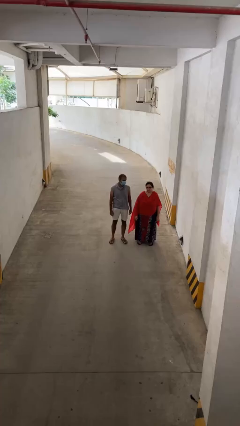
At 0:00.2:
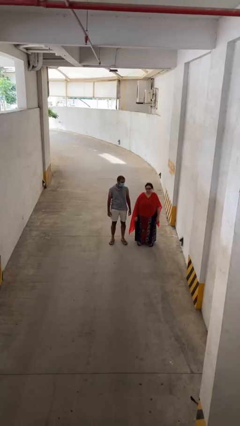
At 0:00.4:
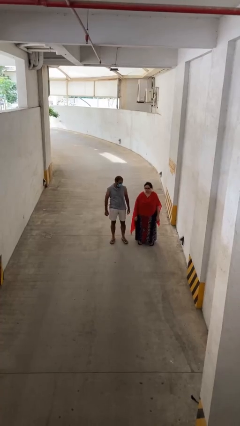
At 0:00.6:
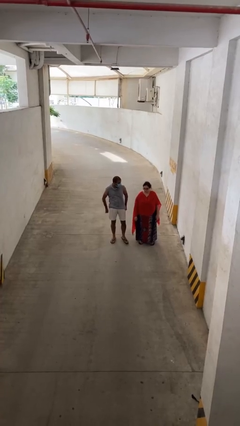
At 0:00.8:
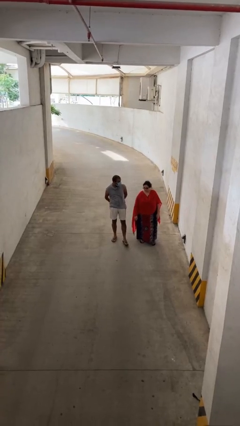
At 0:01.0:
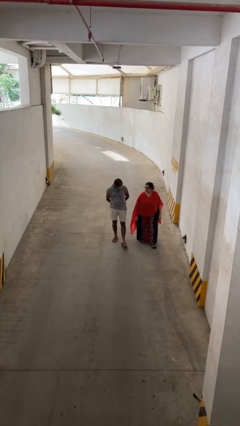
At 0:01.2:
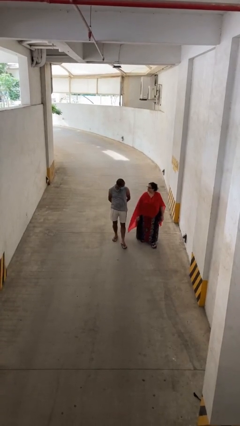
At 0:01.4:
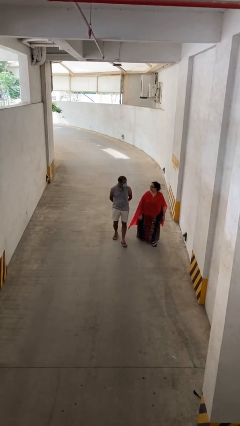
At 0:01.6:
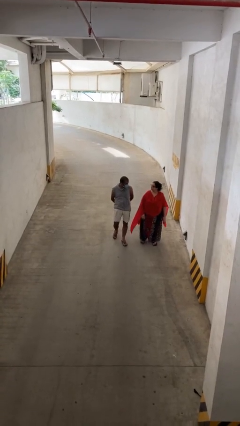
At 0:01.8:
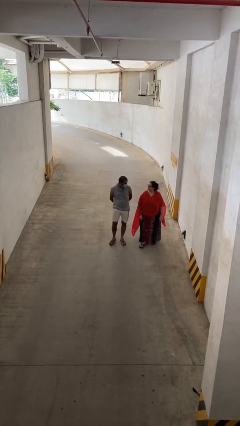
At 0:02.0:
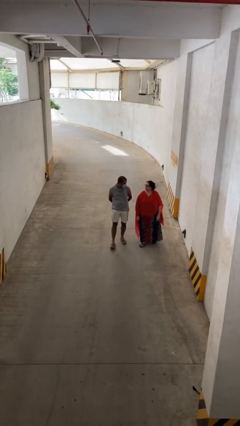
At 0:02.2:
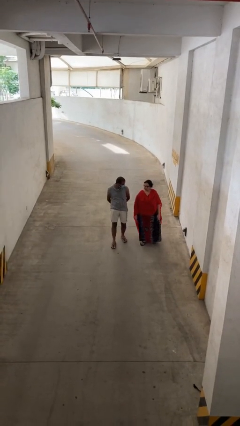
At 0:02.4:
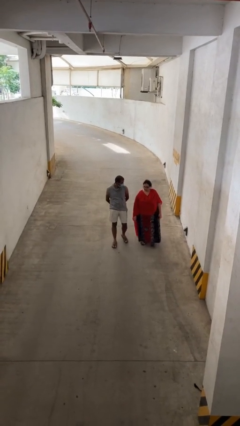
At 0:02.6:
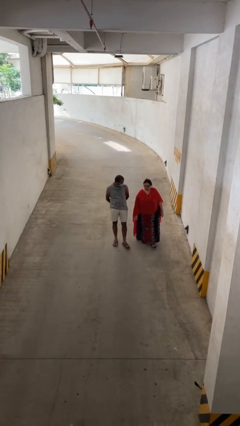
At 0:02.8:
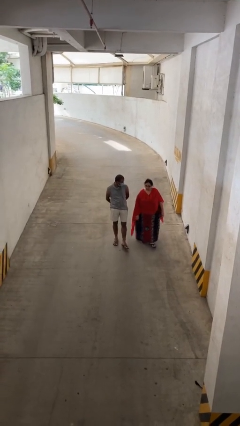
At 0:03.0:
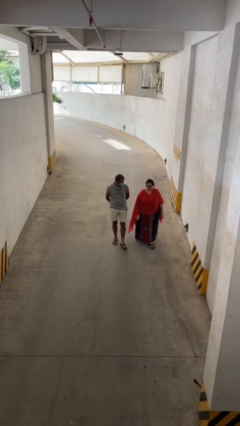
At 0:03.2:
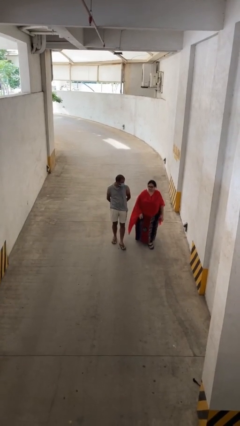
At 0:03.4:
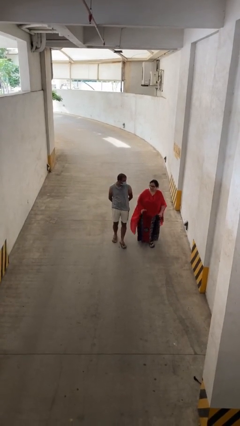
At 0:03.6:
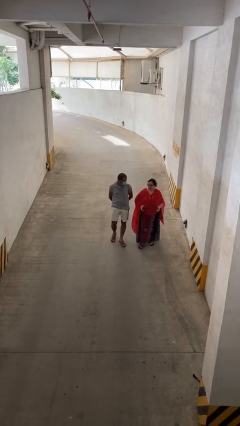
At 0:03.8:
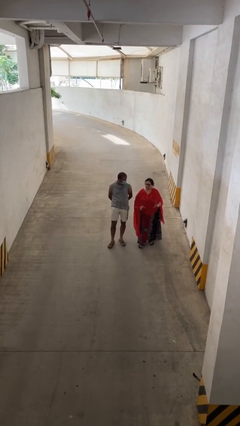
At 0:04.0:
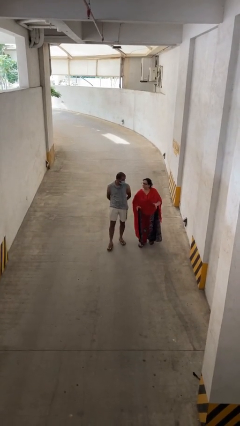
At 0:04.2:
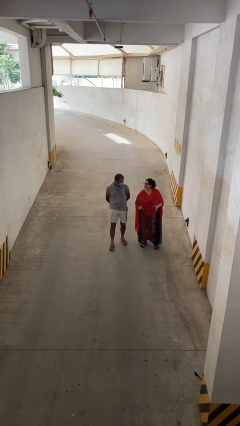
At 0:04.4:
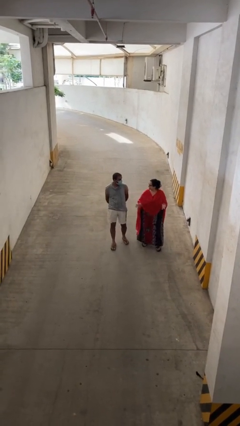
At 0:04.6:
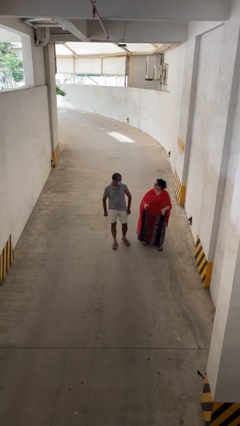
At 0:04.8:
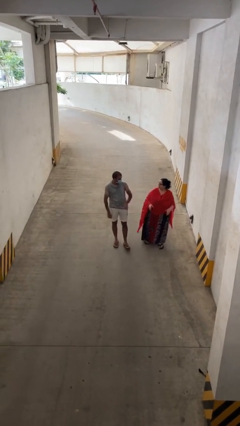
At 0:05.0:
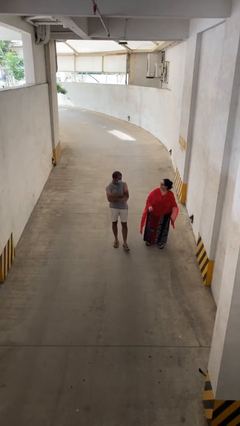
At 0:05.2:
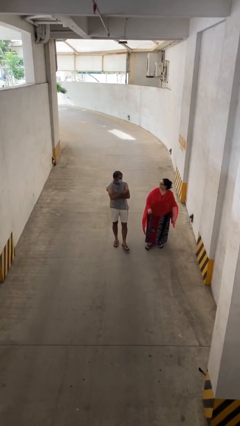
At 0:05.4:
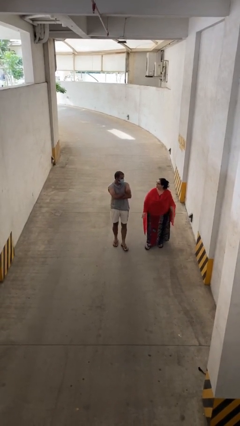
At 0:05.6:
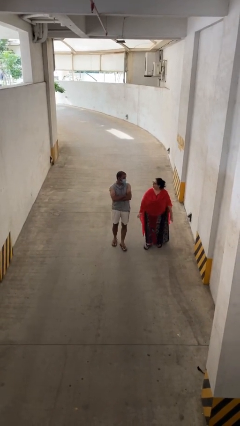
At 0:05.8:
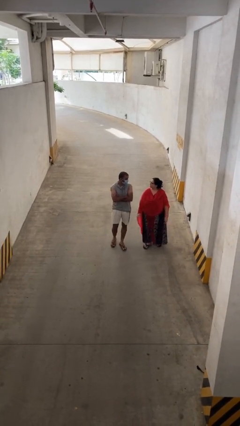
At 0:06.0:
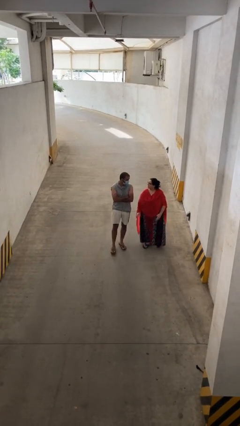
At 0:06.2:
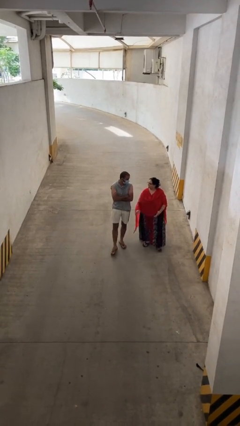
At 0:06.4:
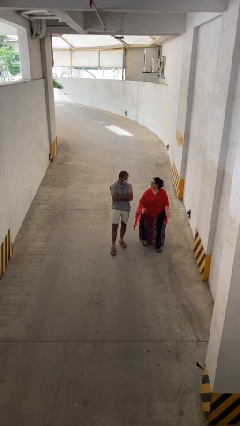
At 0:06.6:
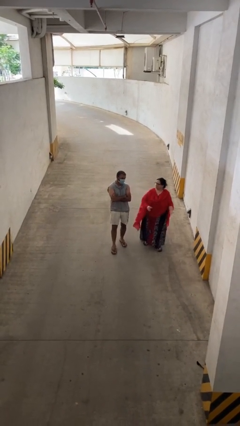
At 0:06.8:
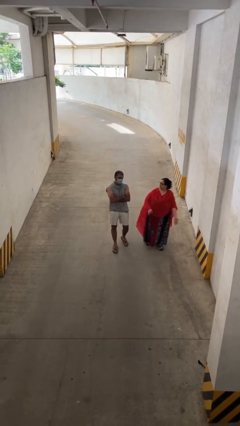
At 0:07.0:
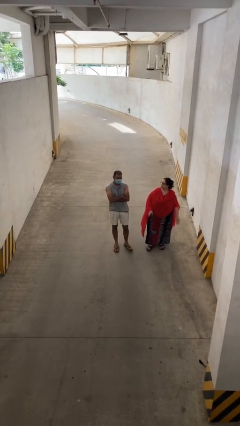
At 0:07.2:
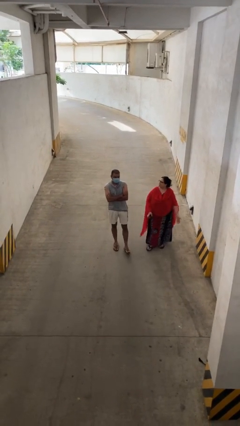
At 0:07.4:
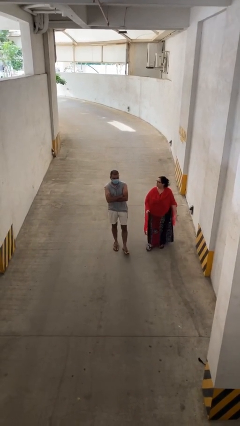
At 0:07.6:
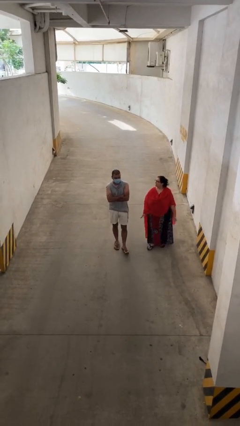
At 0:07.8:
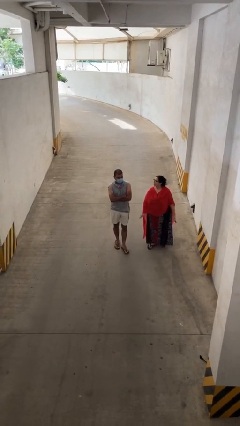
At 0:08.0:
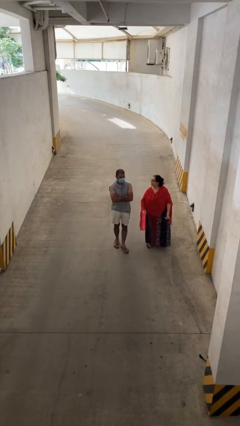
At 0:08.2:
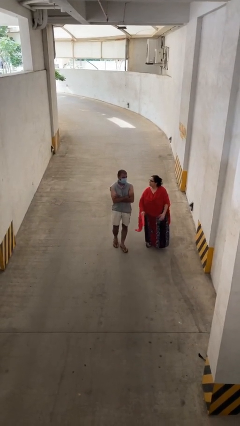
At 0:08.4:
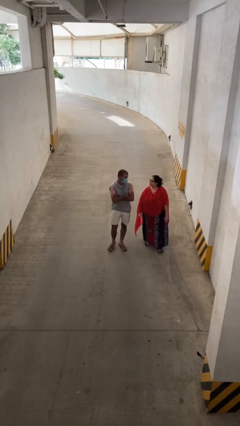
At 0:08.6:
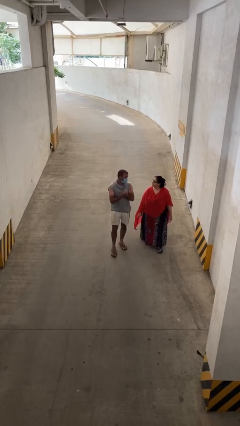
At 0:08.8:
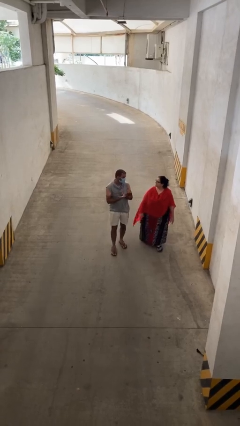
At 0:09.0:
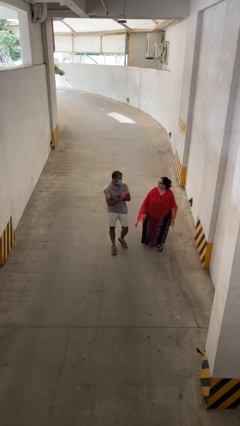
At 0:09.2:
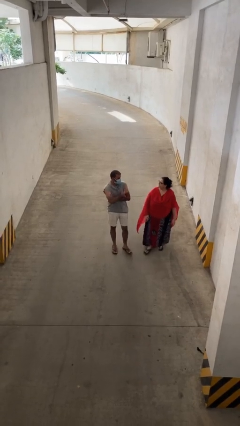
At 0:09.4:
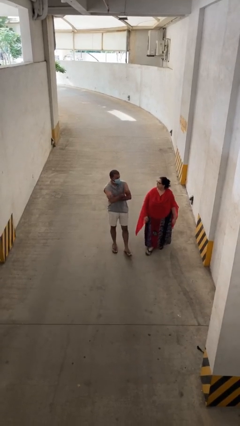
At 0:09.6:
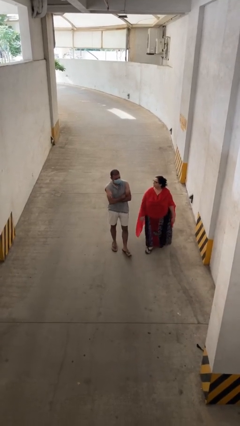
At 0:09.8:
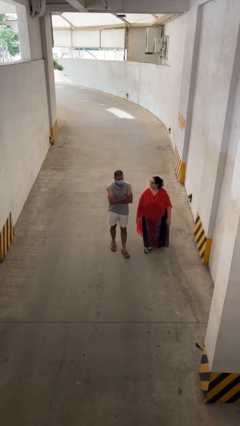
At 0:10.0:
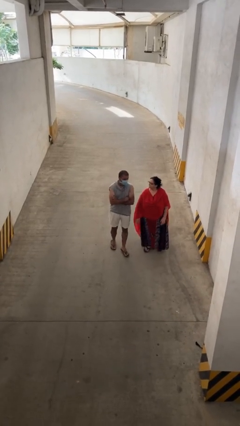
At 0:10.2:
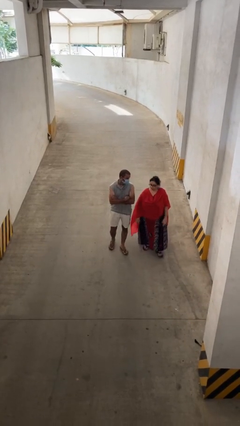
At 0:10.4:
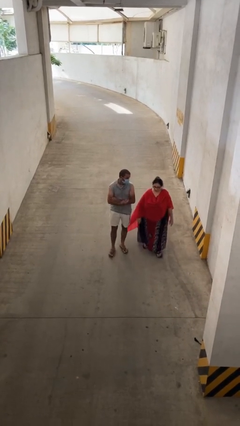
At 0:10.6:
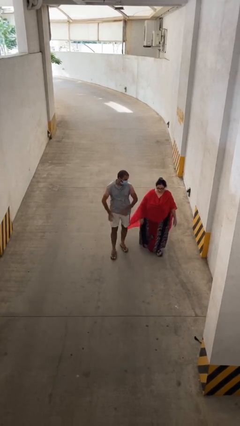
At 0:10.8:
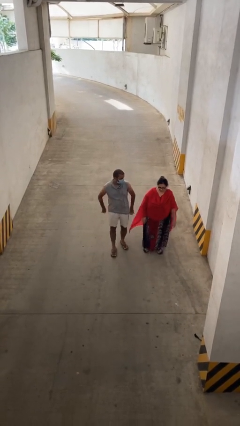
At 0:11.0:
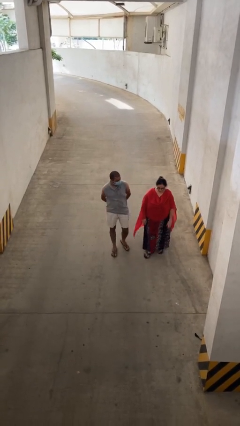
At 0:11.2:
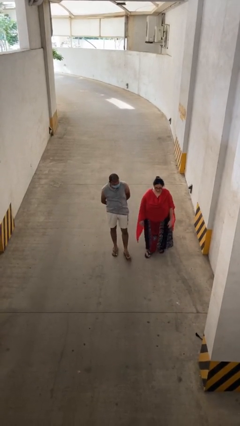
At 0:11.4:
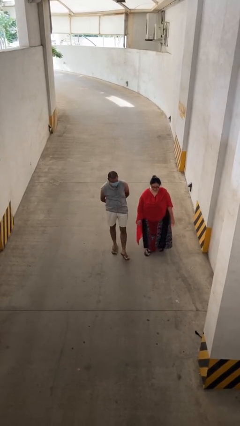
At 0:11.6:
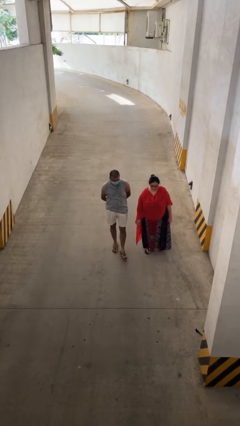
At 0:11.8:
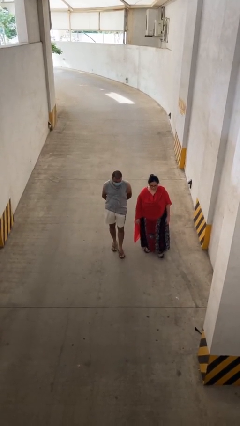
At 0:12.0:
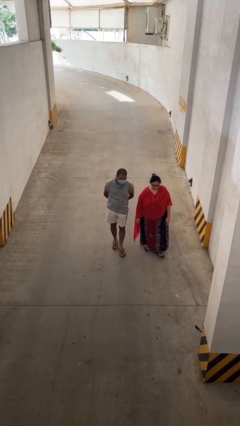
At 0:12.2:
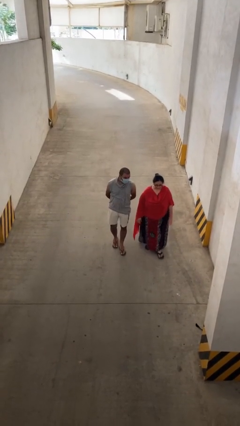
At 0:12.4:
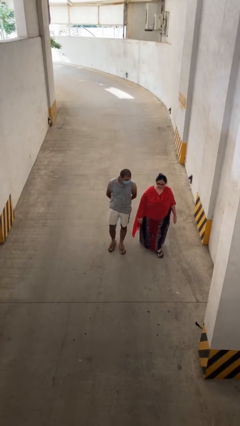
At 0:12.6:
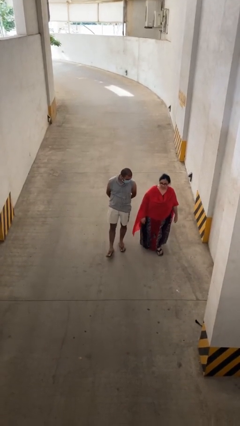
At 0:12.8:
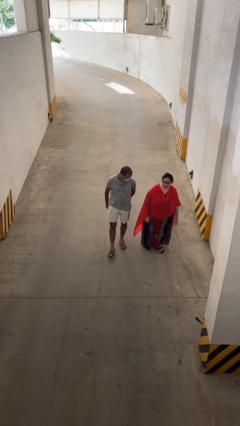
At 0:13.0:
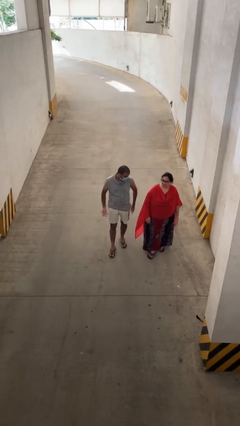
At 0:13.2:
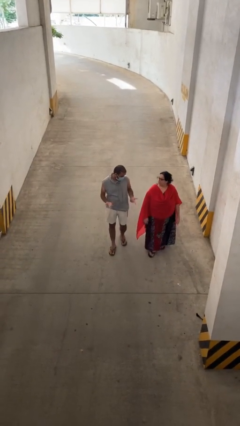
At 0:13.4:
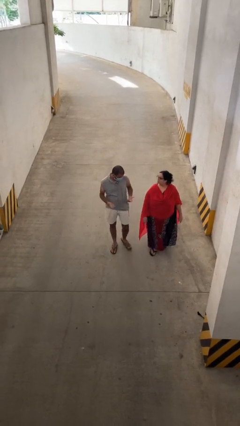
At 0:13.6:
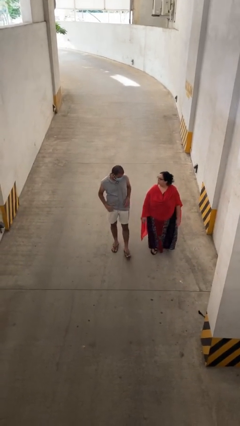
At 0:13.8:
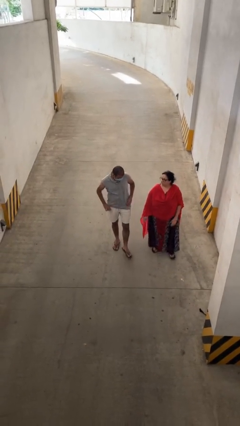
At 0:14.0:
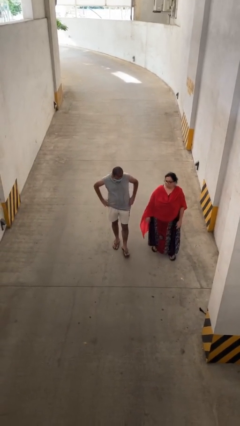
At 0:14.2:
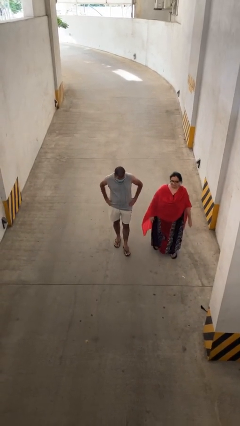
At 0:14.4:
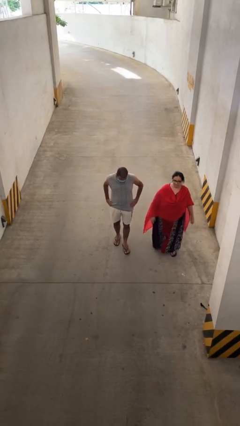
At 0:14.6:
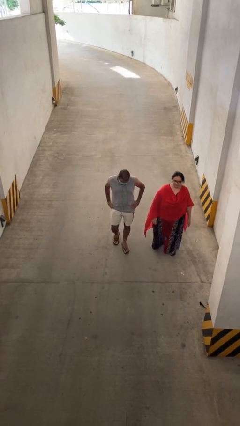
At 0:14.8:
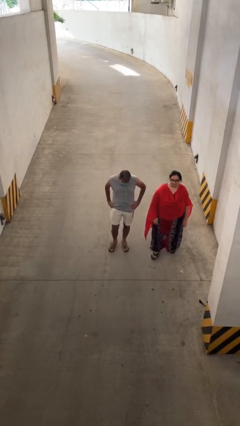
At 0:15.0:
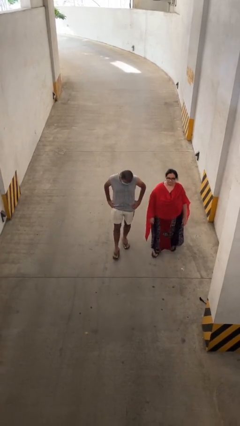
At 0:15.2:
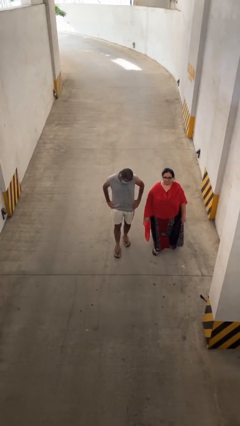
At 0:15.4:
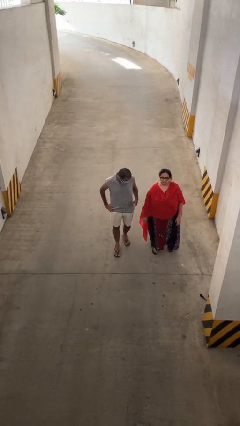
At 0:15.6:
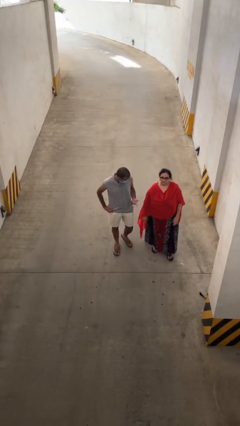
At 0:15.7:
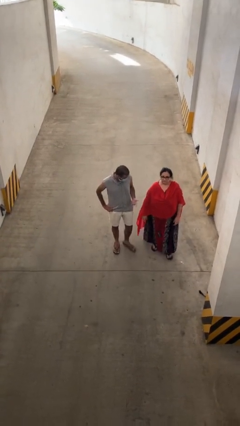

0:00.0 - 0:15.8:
person talks to person

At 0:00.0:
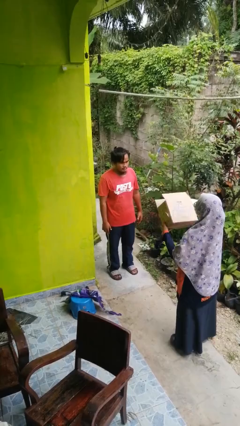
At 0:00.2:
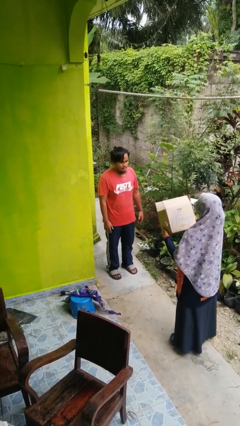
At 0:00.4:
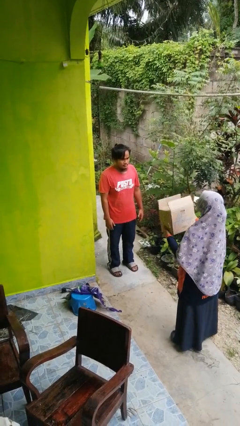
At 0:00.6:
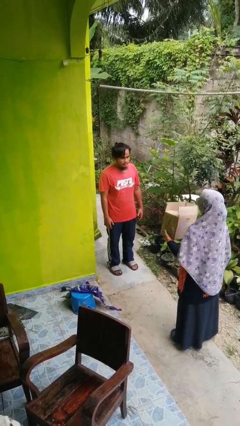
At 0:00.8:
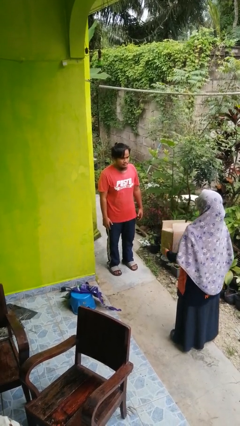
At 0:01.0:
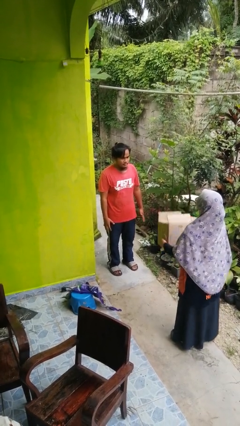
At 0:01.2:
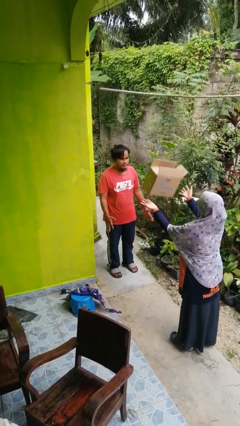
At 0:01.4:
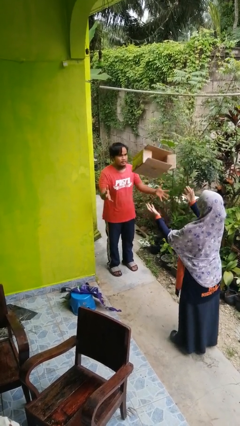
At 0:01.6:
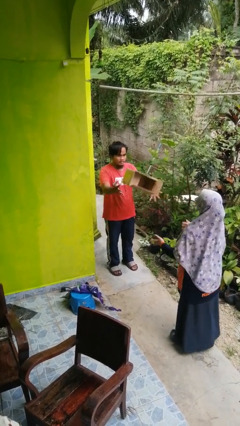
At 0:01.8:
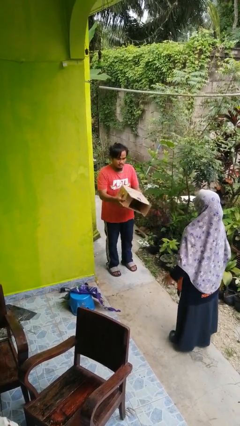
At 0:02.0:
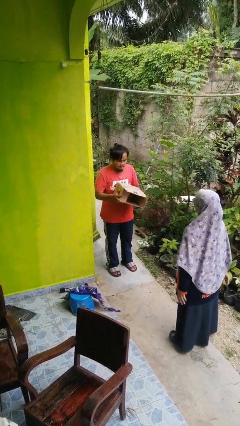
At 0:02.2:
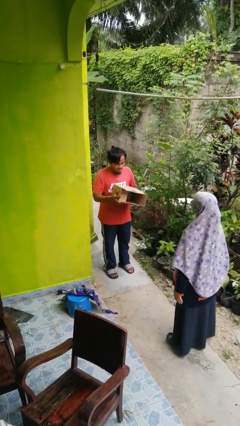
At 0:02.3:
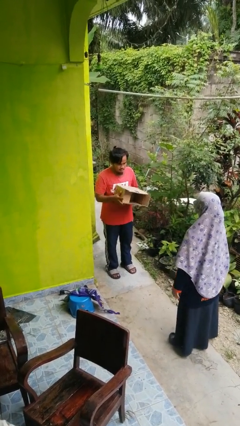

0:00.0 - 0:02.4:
person catches object from person
